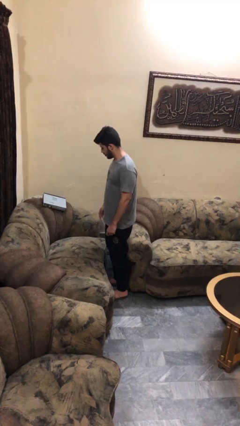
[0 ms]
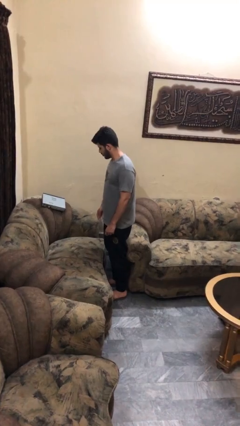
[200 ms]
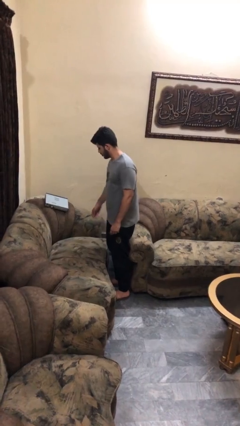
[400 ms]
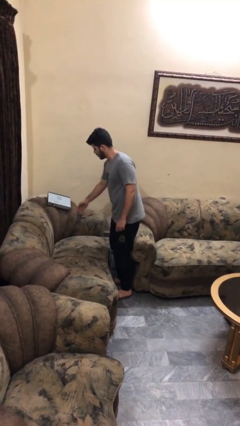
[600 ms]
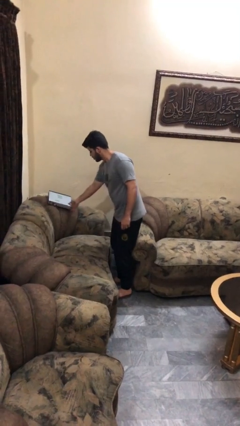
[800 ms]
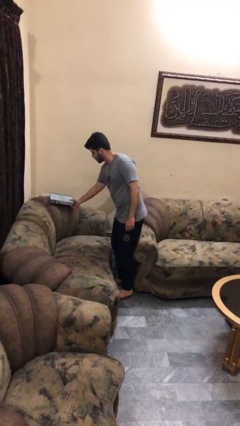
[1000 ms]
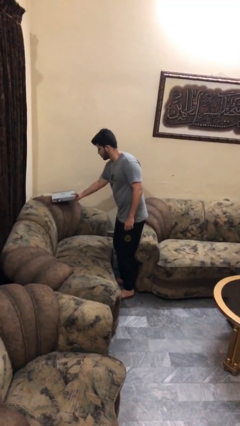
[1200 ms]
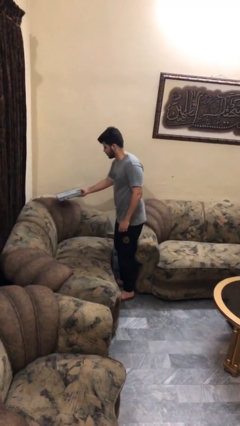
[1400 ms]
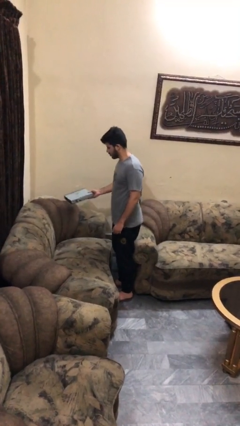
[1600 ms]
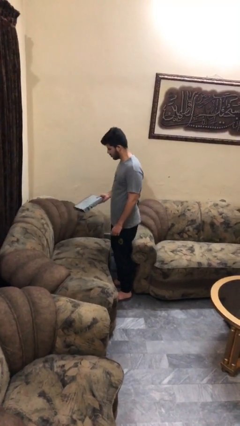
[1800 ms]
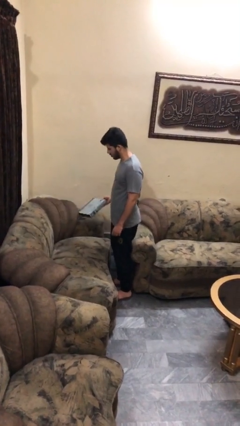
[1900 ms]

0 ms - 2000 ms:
person picks up object from couch

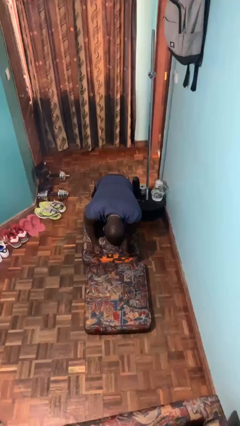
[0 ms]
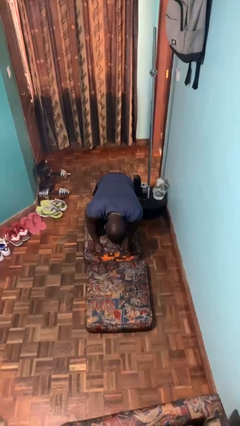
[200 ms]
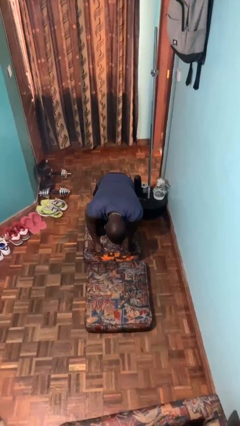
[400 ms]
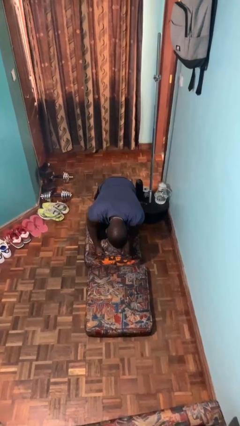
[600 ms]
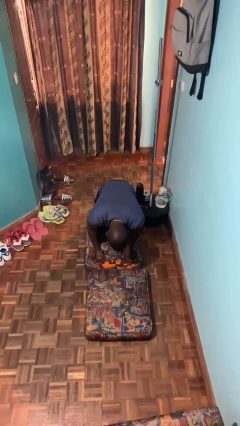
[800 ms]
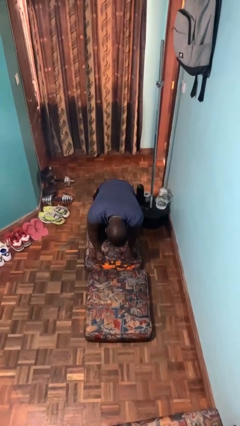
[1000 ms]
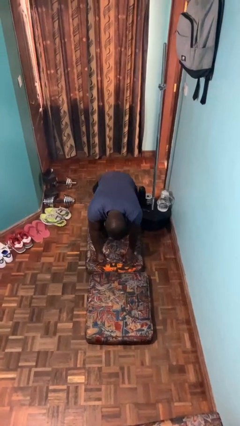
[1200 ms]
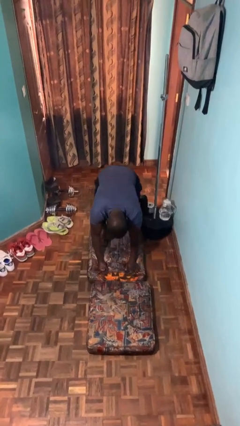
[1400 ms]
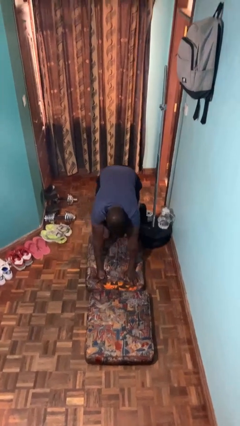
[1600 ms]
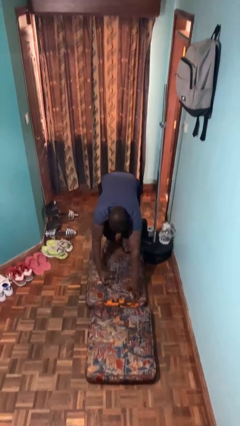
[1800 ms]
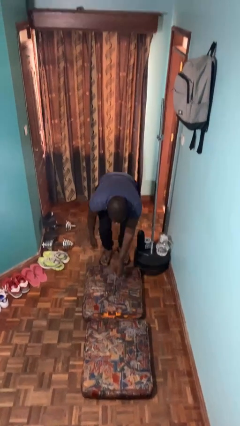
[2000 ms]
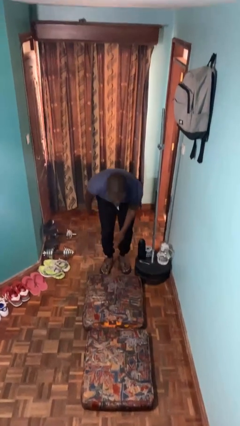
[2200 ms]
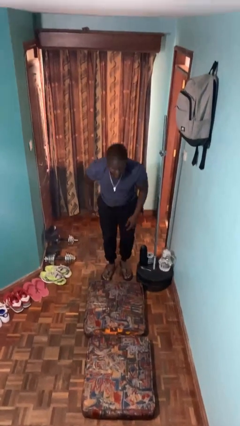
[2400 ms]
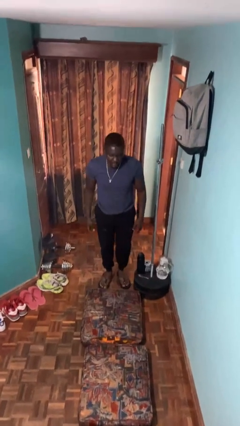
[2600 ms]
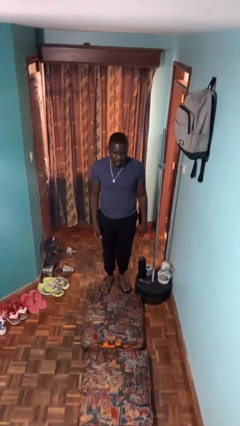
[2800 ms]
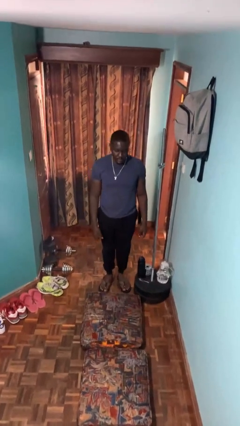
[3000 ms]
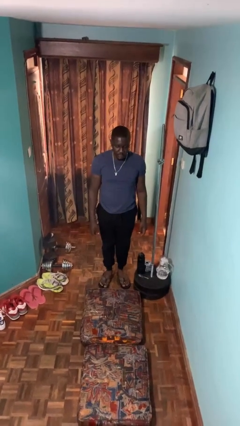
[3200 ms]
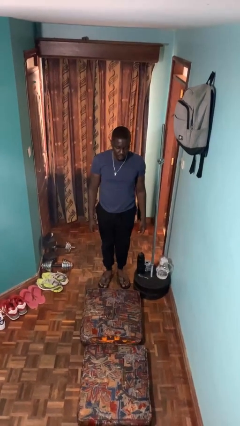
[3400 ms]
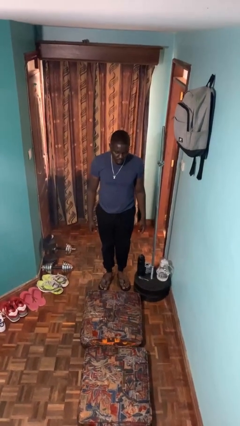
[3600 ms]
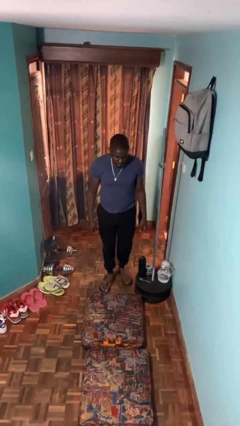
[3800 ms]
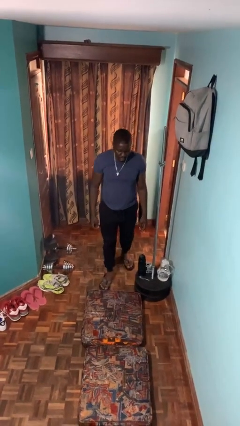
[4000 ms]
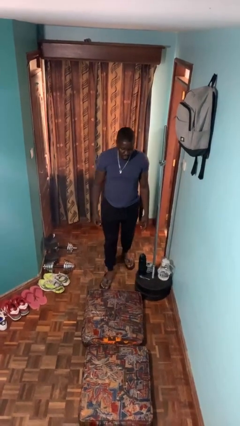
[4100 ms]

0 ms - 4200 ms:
person stands up from floor

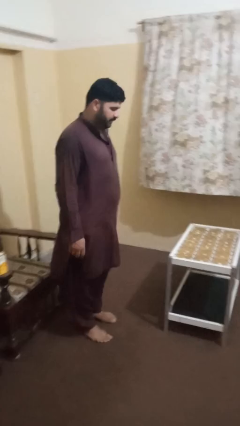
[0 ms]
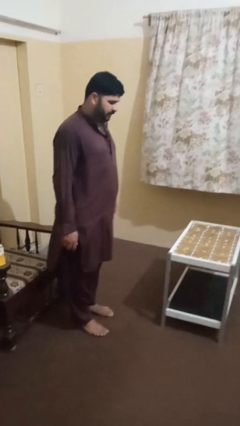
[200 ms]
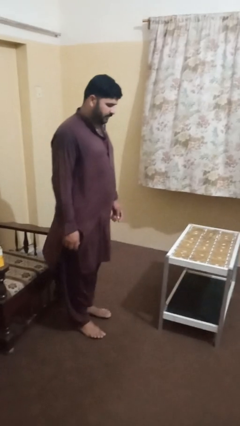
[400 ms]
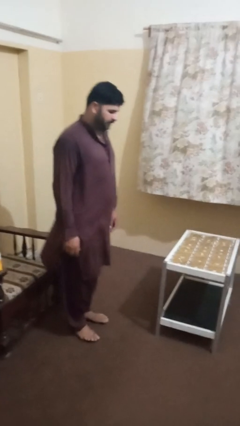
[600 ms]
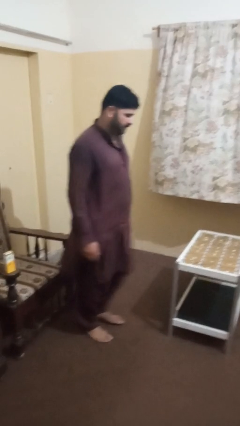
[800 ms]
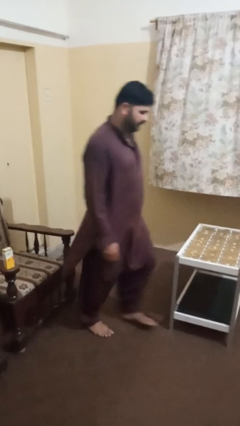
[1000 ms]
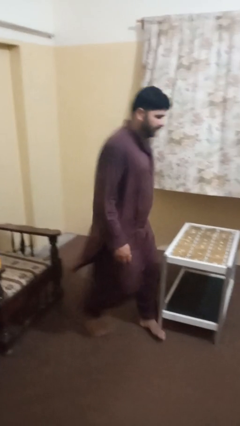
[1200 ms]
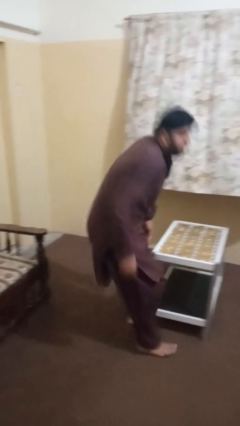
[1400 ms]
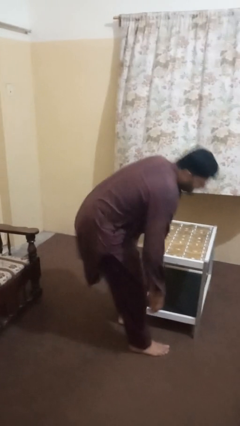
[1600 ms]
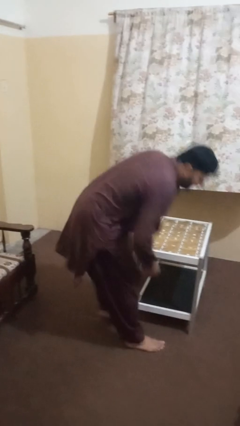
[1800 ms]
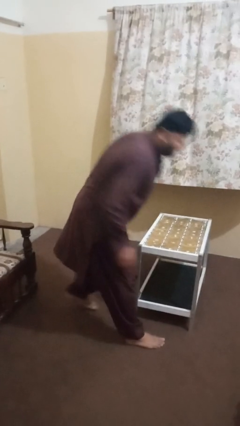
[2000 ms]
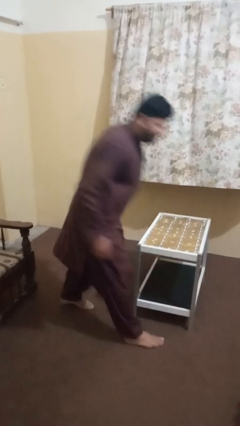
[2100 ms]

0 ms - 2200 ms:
person bumps into table

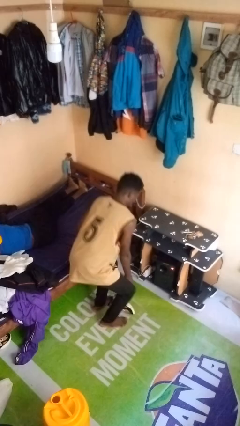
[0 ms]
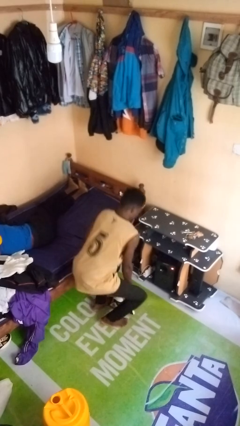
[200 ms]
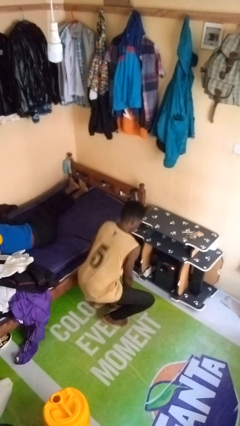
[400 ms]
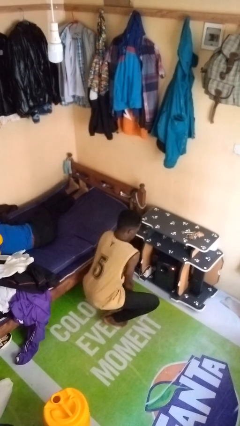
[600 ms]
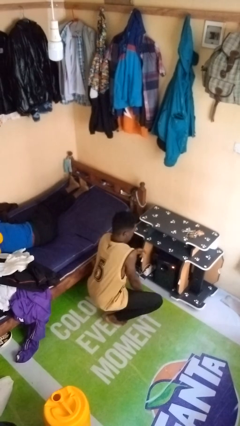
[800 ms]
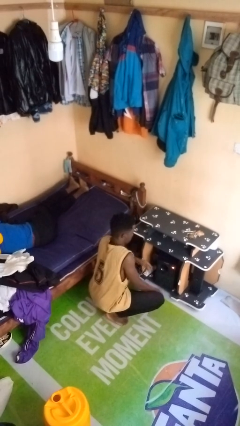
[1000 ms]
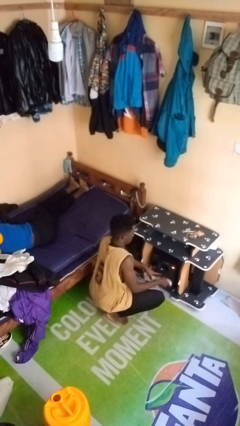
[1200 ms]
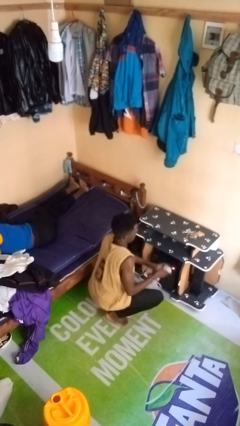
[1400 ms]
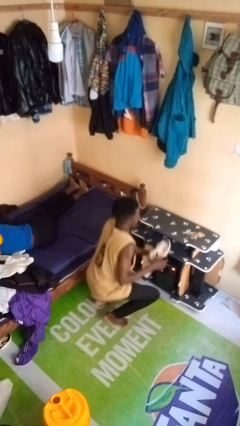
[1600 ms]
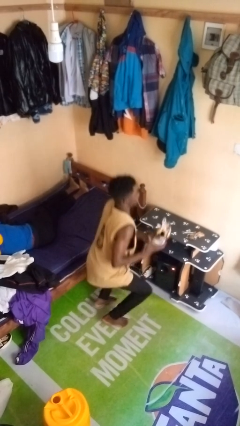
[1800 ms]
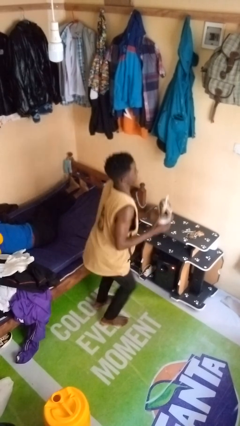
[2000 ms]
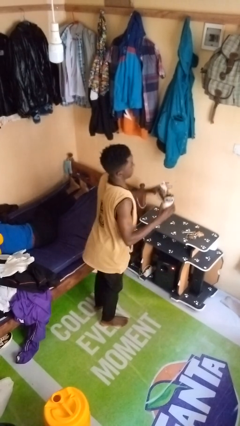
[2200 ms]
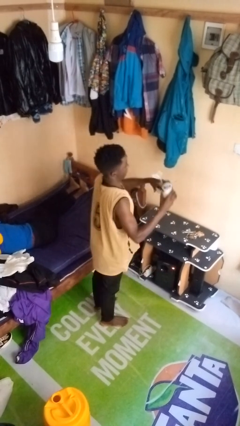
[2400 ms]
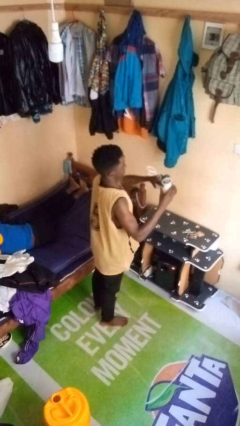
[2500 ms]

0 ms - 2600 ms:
person picks up object from floor

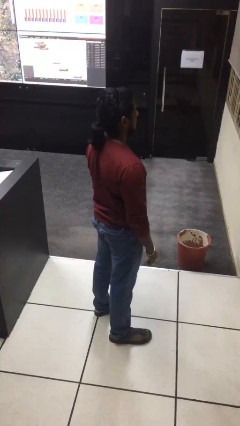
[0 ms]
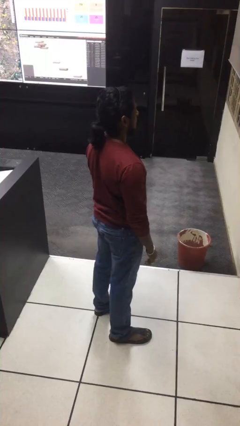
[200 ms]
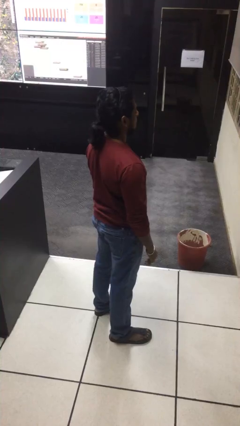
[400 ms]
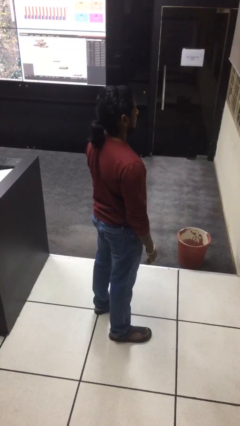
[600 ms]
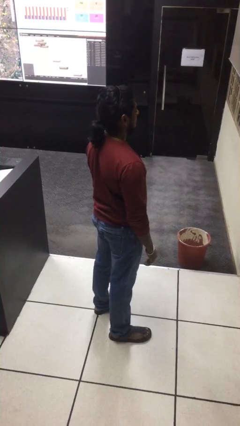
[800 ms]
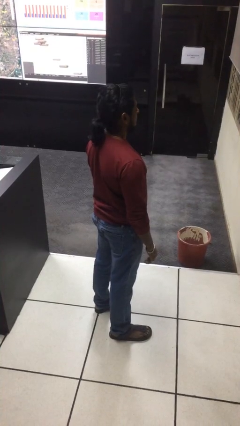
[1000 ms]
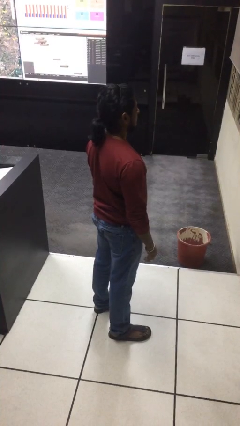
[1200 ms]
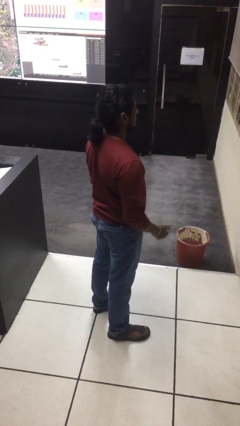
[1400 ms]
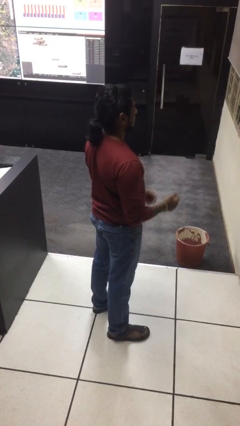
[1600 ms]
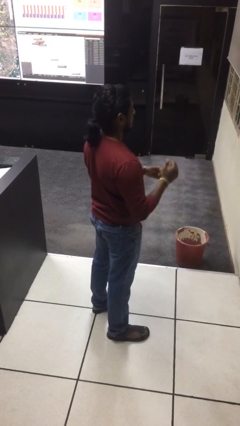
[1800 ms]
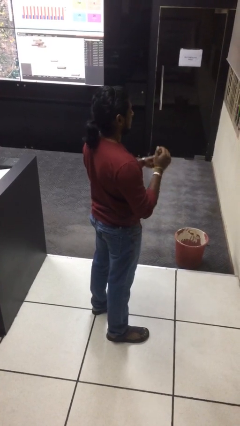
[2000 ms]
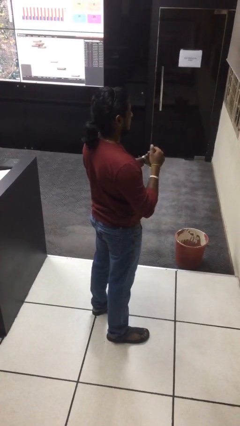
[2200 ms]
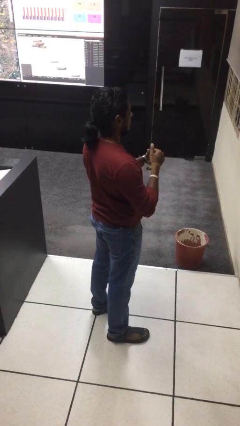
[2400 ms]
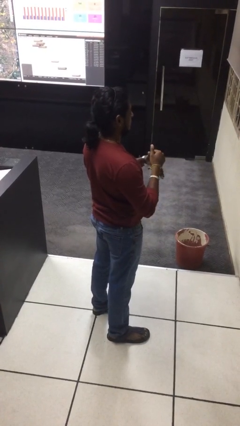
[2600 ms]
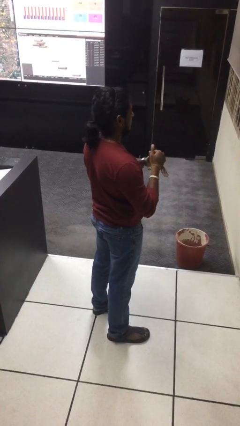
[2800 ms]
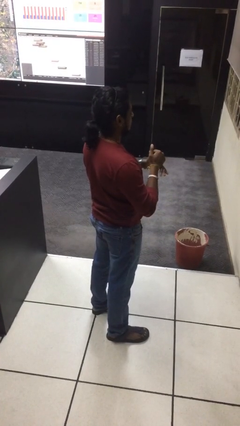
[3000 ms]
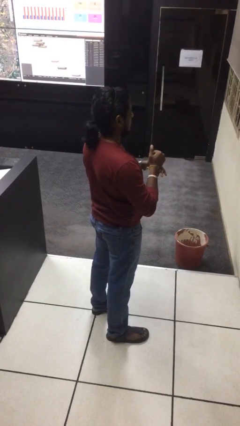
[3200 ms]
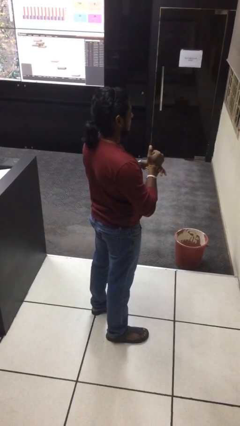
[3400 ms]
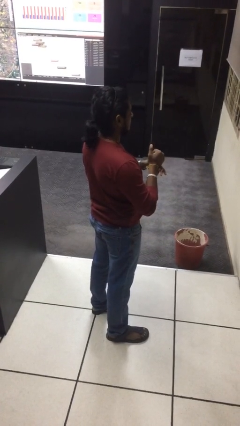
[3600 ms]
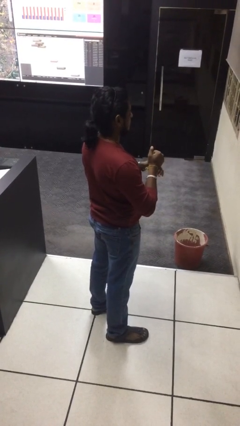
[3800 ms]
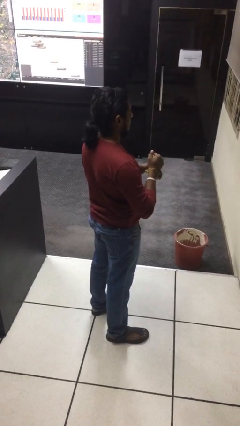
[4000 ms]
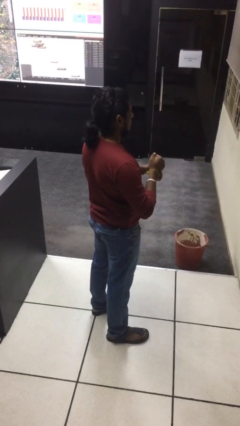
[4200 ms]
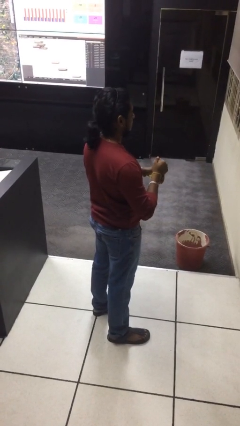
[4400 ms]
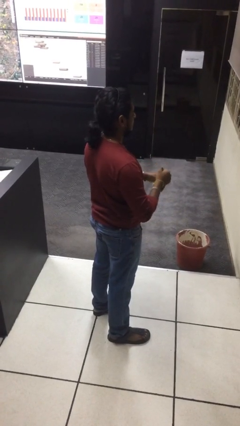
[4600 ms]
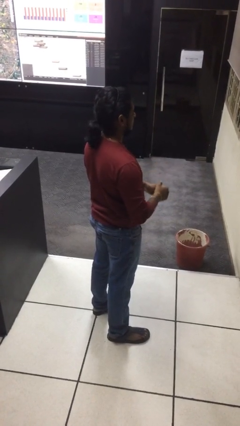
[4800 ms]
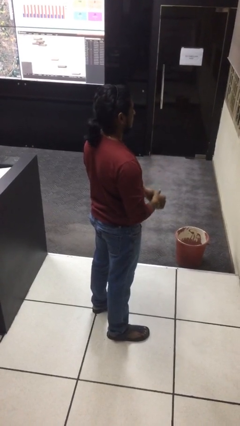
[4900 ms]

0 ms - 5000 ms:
person cracks knuckles

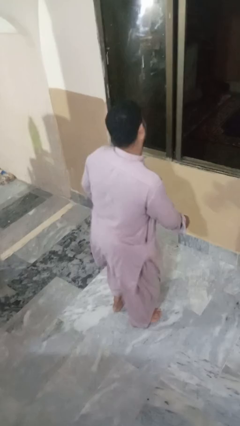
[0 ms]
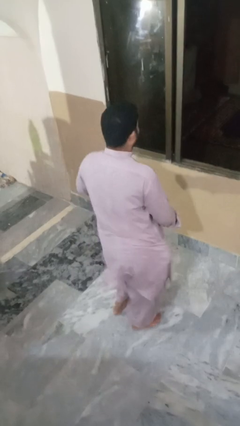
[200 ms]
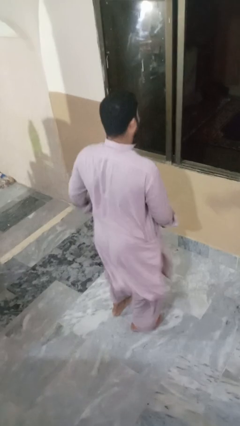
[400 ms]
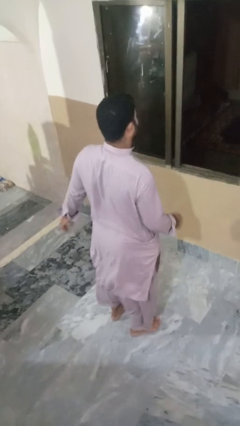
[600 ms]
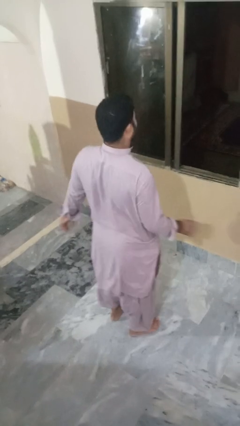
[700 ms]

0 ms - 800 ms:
person wiggles hips

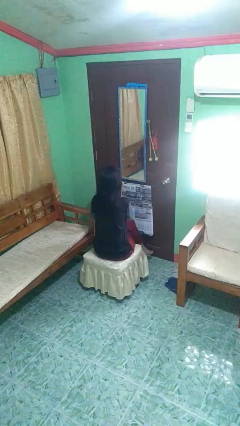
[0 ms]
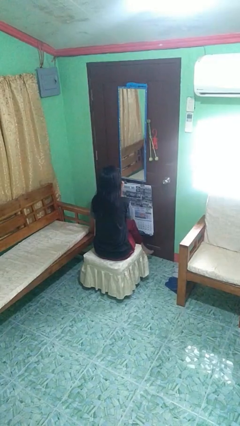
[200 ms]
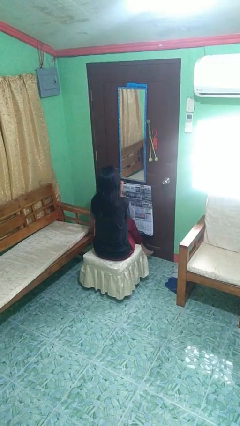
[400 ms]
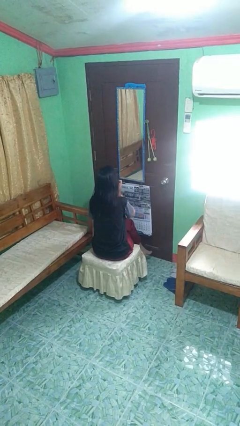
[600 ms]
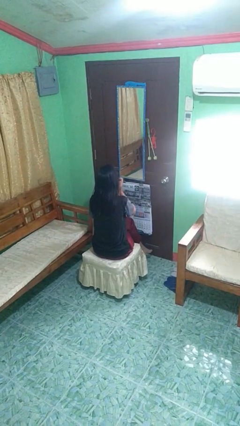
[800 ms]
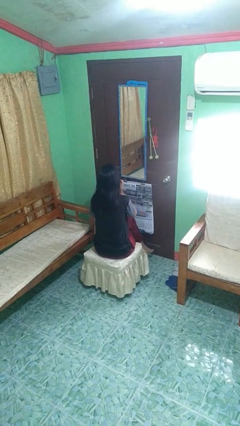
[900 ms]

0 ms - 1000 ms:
person scratches face
